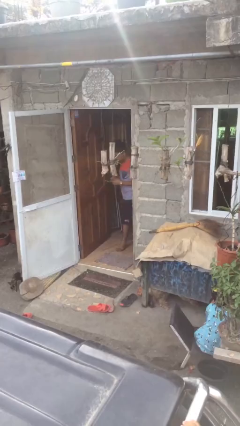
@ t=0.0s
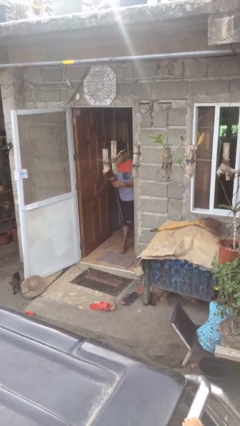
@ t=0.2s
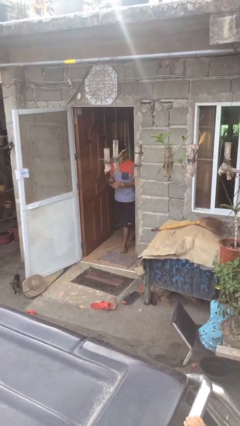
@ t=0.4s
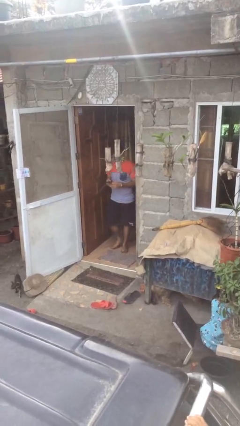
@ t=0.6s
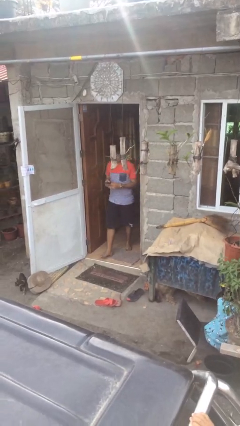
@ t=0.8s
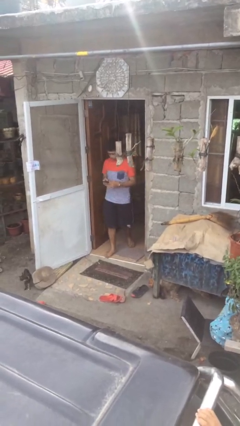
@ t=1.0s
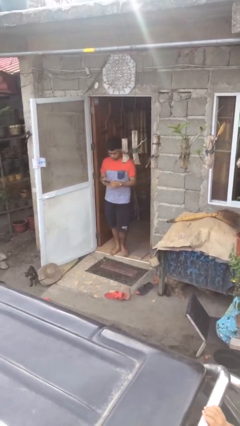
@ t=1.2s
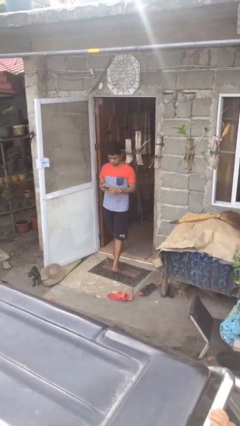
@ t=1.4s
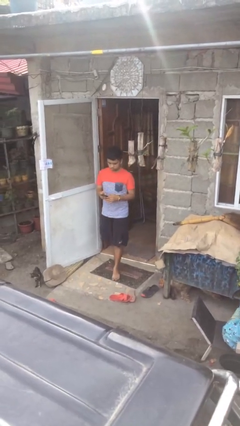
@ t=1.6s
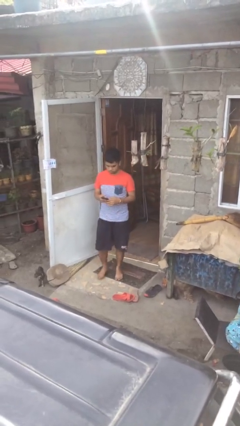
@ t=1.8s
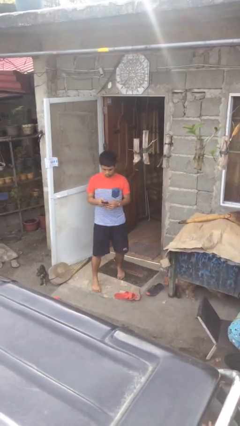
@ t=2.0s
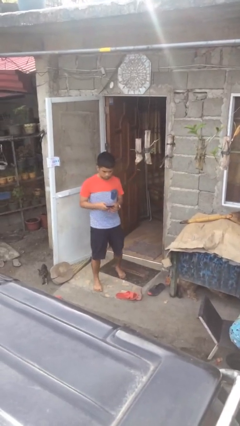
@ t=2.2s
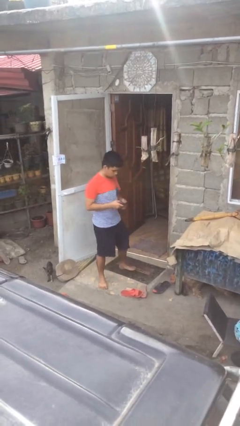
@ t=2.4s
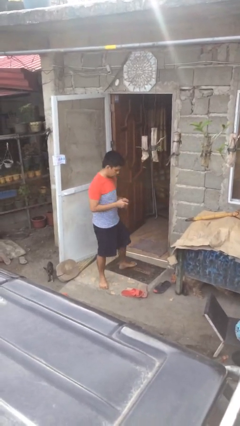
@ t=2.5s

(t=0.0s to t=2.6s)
person enters scene through structure

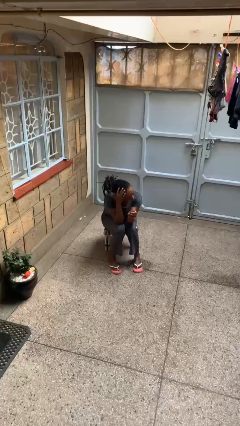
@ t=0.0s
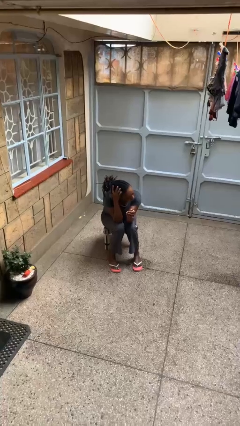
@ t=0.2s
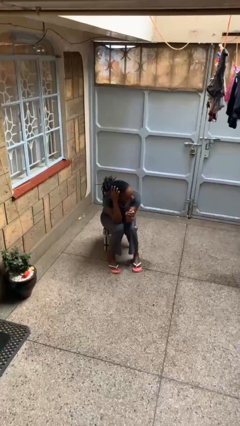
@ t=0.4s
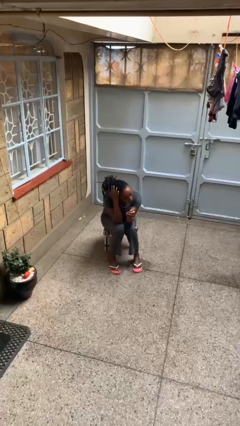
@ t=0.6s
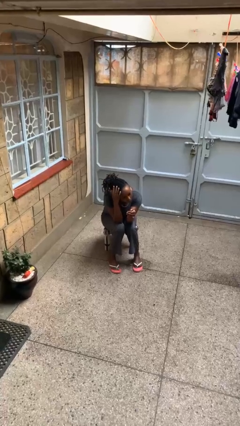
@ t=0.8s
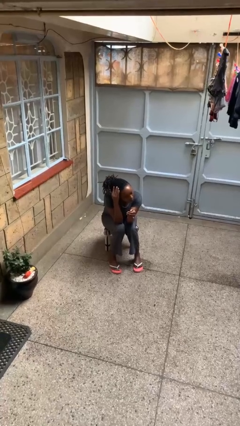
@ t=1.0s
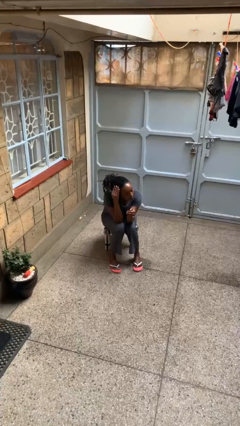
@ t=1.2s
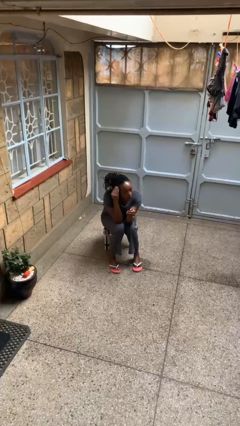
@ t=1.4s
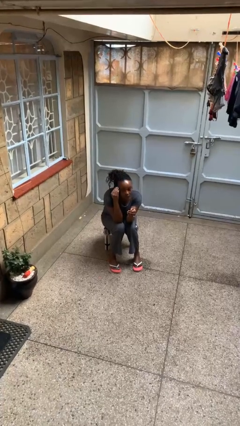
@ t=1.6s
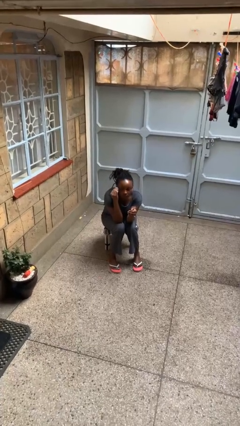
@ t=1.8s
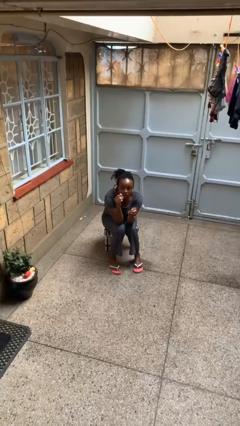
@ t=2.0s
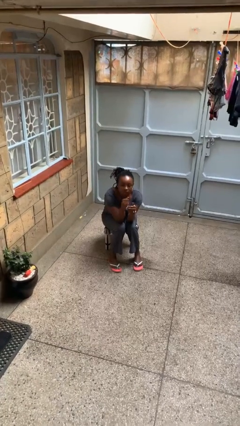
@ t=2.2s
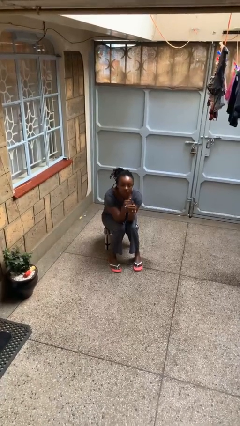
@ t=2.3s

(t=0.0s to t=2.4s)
person strokes hair

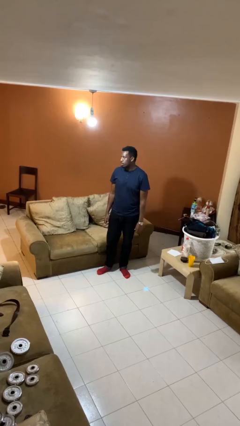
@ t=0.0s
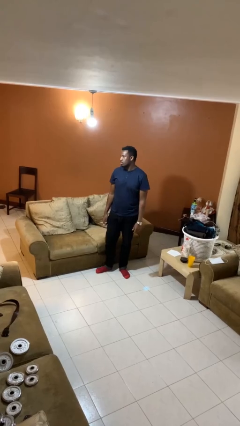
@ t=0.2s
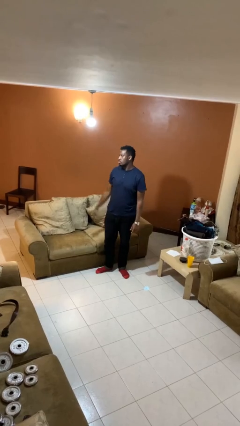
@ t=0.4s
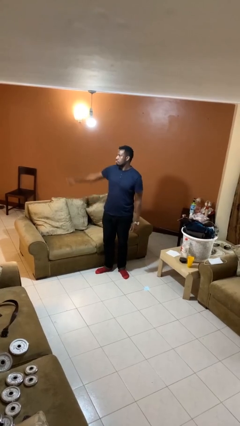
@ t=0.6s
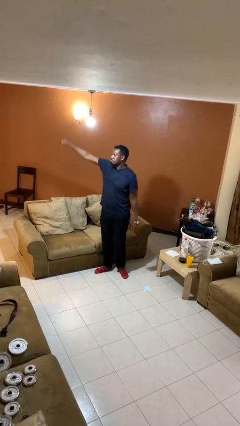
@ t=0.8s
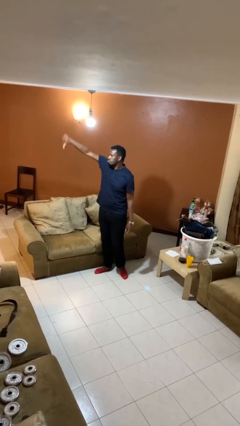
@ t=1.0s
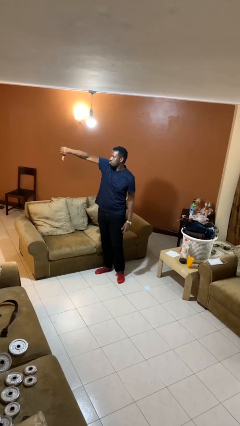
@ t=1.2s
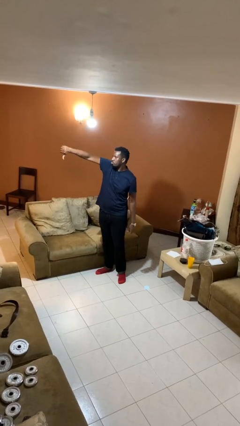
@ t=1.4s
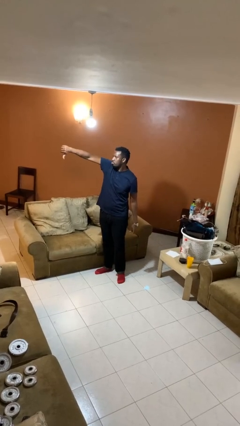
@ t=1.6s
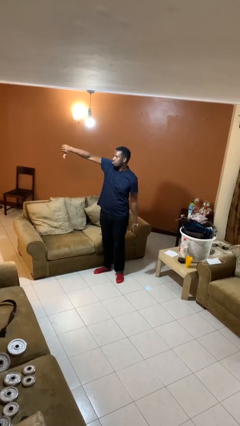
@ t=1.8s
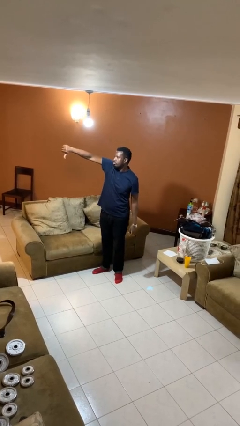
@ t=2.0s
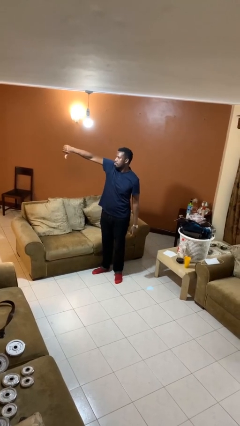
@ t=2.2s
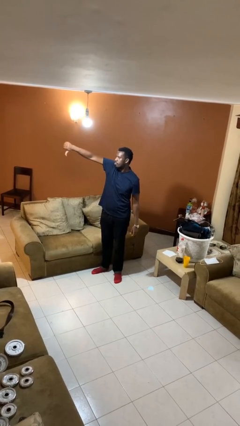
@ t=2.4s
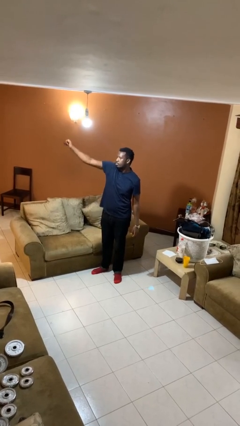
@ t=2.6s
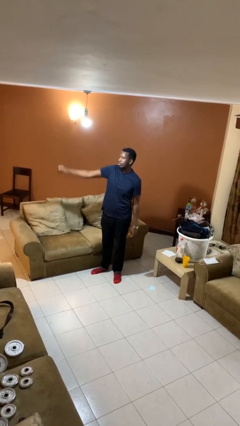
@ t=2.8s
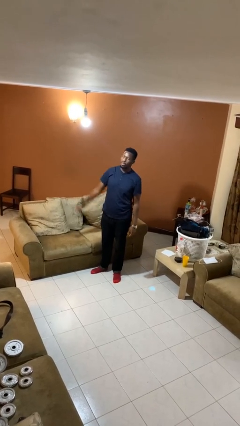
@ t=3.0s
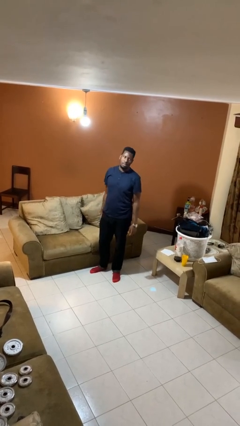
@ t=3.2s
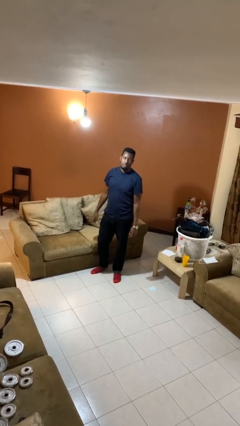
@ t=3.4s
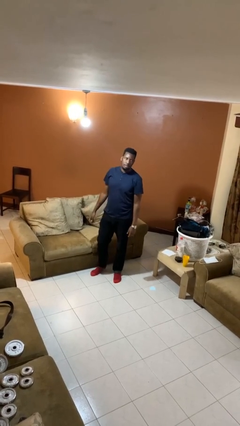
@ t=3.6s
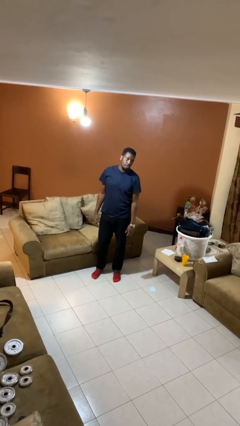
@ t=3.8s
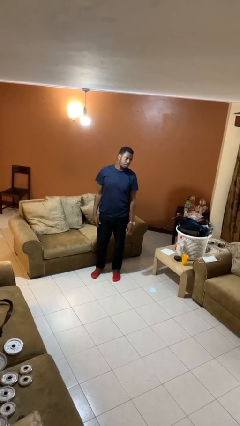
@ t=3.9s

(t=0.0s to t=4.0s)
person gestures thumbs down

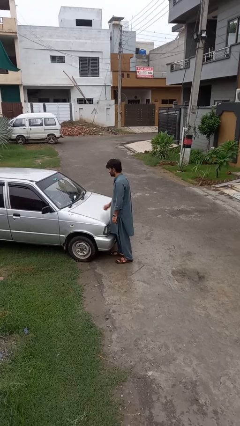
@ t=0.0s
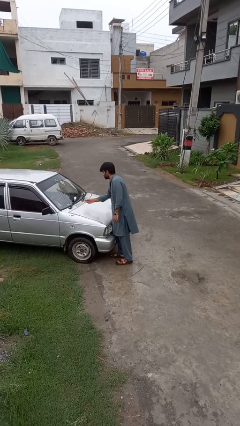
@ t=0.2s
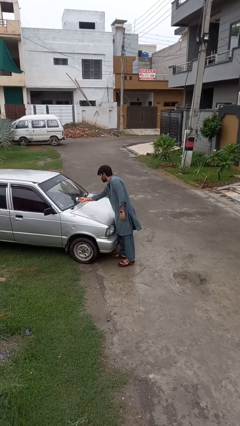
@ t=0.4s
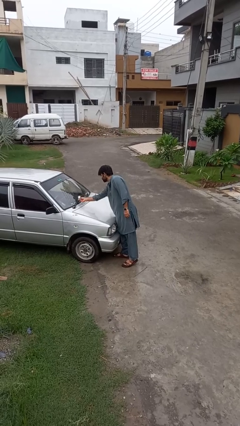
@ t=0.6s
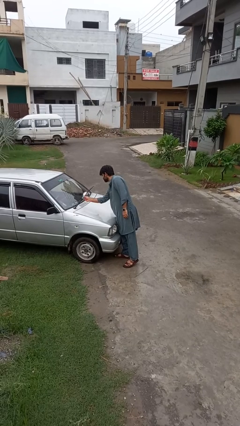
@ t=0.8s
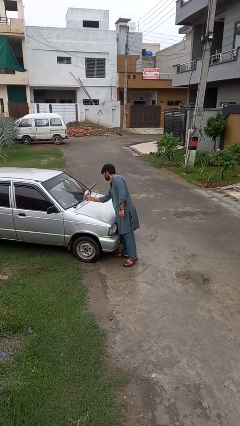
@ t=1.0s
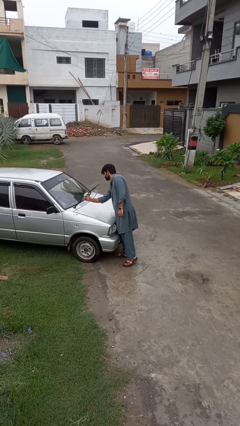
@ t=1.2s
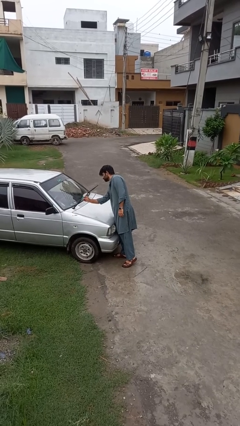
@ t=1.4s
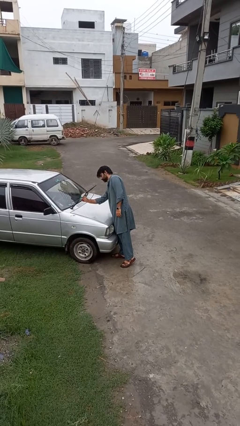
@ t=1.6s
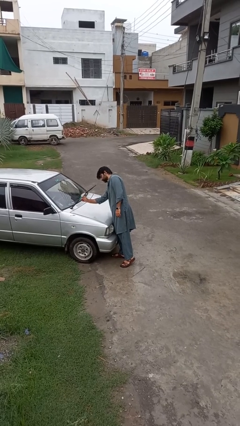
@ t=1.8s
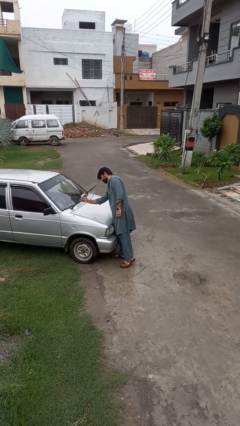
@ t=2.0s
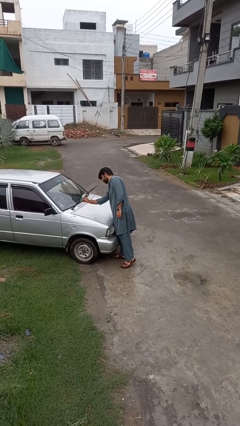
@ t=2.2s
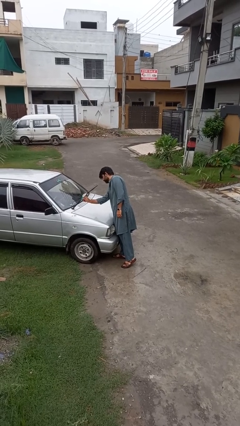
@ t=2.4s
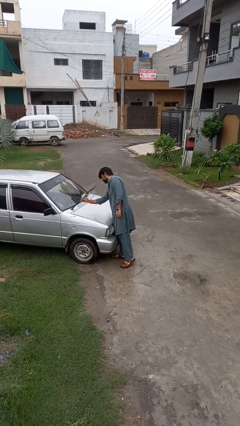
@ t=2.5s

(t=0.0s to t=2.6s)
person flips up car wipers

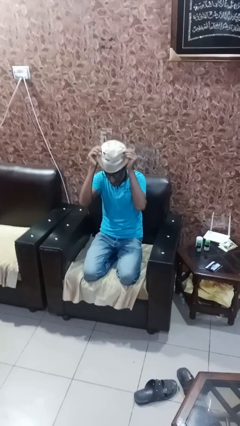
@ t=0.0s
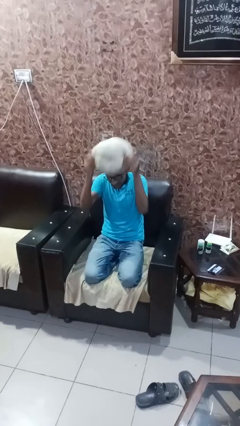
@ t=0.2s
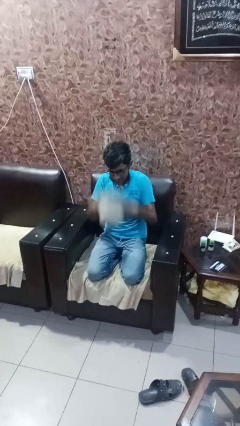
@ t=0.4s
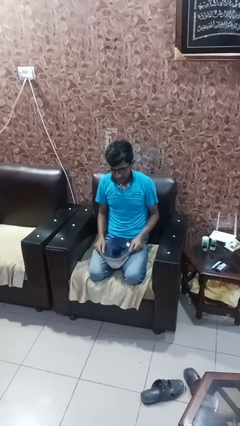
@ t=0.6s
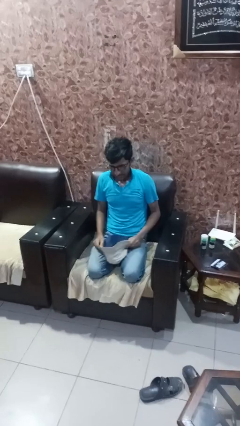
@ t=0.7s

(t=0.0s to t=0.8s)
person takes off hat

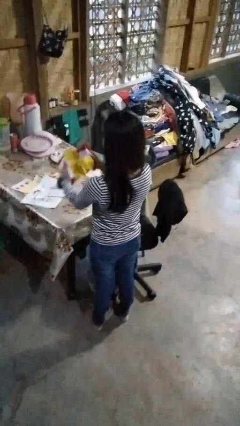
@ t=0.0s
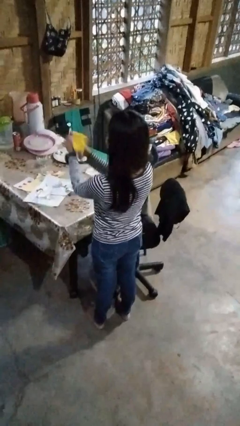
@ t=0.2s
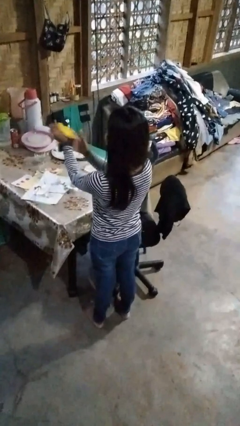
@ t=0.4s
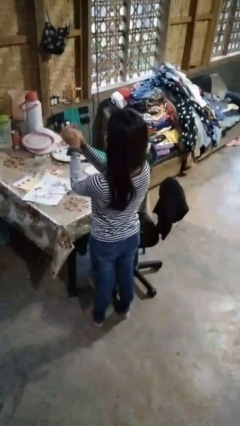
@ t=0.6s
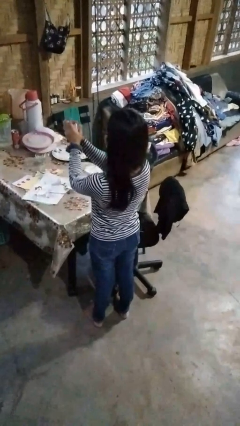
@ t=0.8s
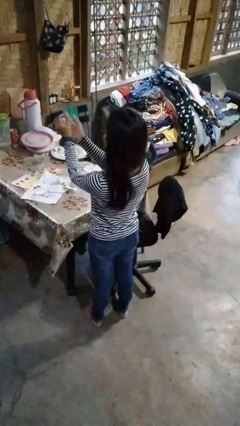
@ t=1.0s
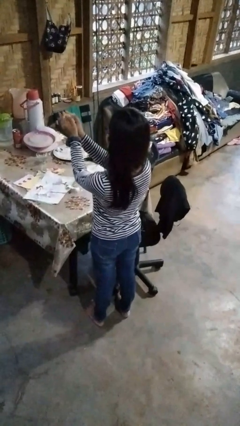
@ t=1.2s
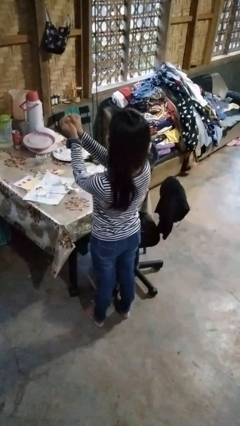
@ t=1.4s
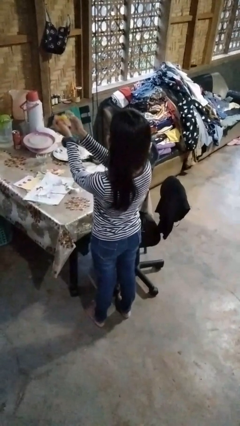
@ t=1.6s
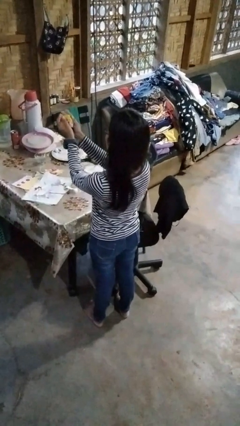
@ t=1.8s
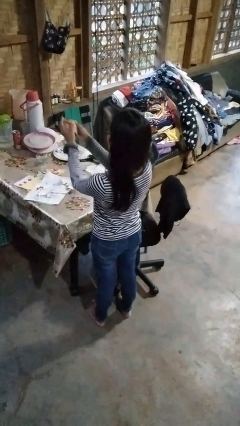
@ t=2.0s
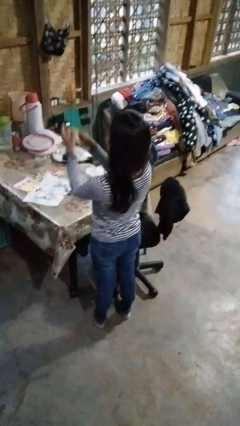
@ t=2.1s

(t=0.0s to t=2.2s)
person crumples paper

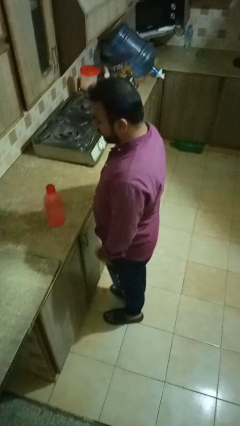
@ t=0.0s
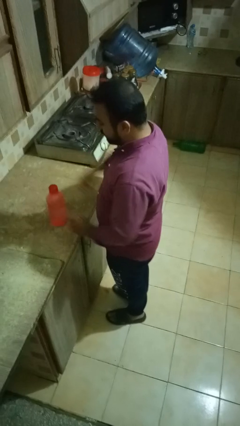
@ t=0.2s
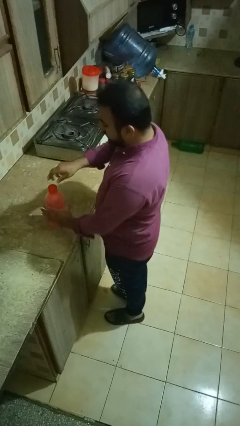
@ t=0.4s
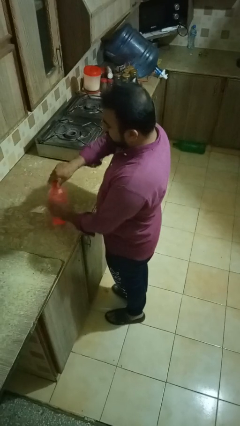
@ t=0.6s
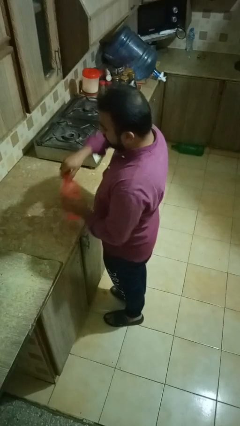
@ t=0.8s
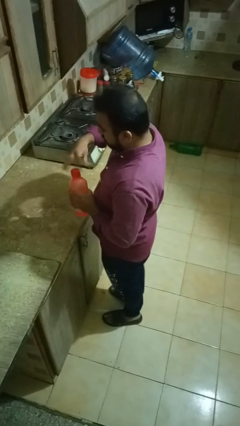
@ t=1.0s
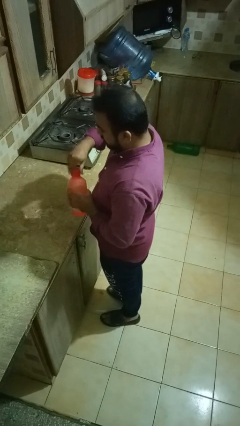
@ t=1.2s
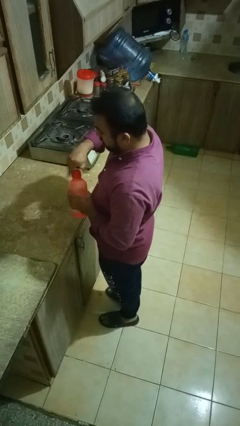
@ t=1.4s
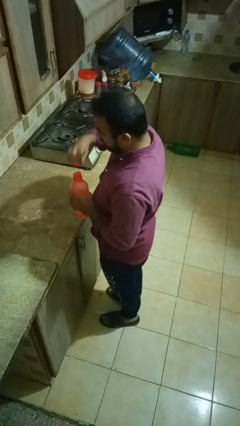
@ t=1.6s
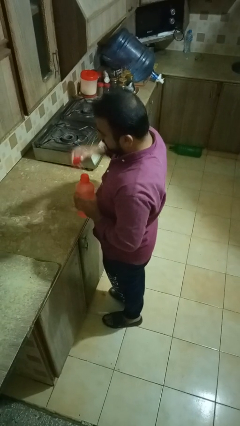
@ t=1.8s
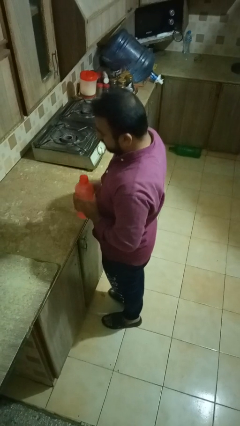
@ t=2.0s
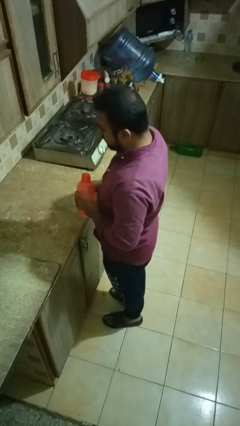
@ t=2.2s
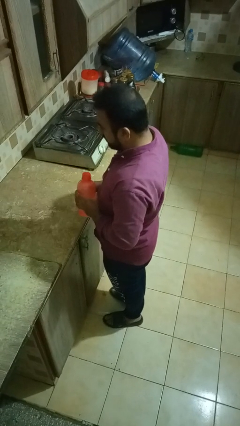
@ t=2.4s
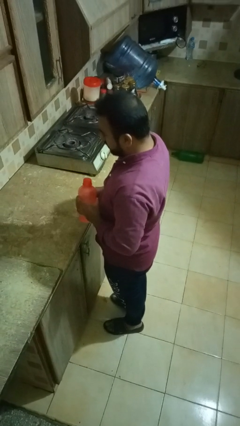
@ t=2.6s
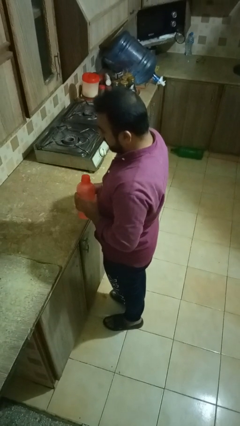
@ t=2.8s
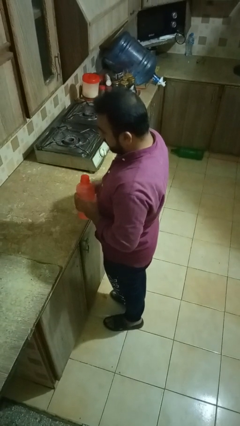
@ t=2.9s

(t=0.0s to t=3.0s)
person unscrews lid from bottle
